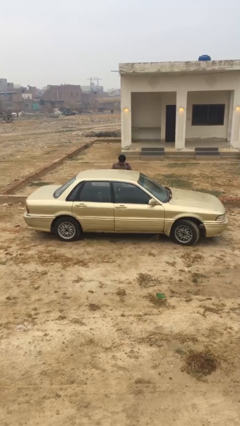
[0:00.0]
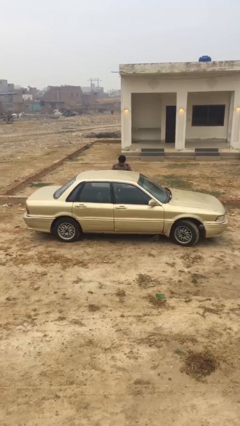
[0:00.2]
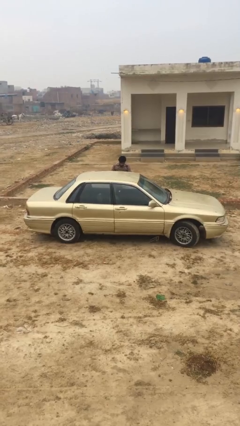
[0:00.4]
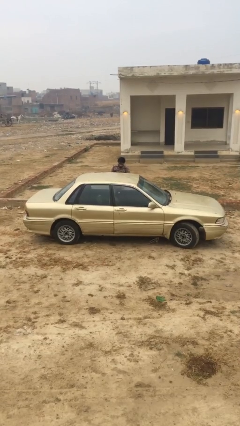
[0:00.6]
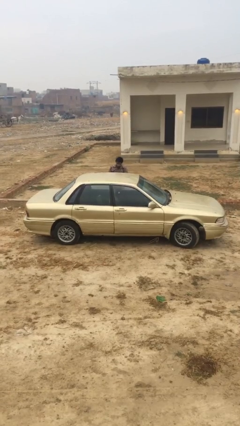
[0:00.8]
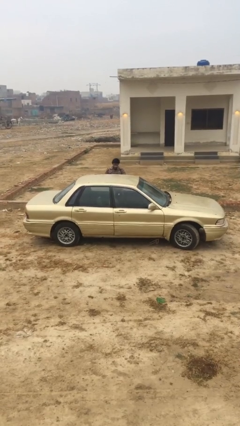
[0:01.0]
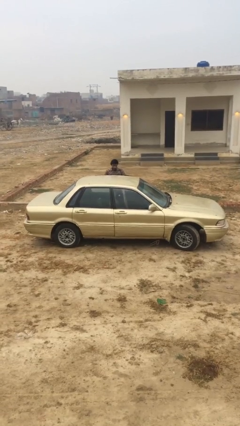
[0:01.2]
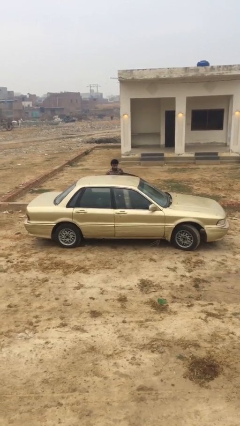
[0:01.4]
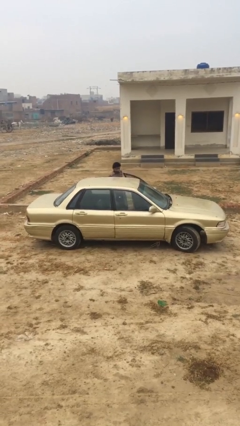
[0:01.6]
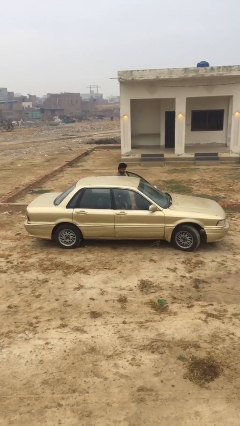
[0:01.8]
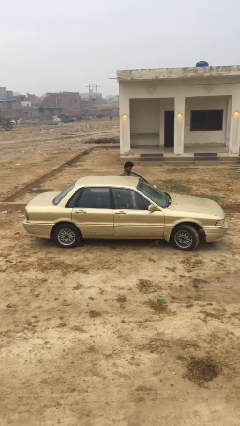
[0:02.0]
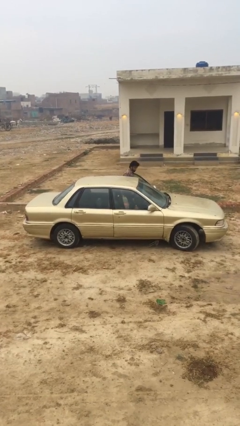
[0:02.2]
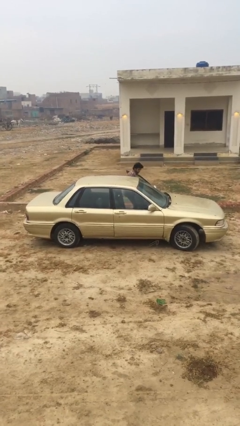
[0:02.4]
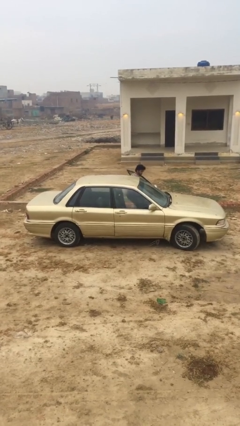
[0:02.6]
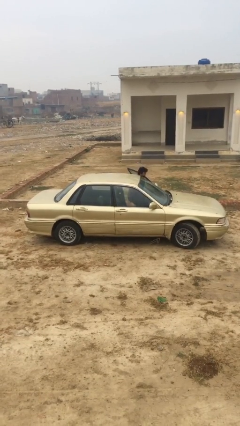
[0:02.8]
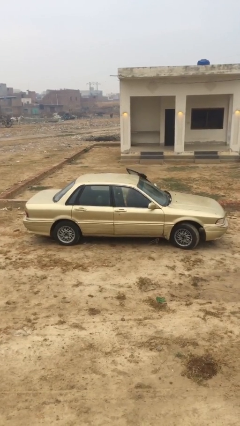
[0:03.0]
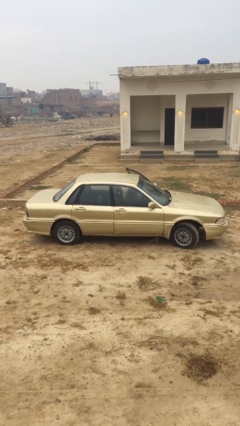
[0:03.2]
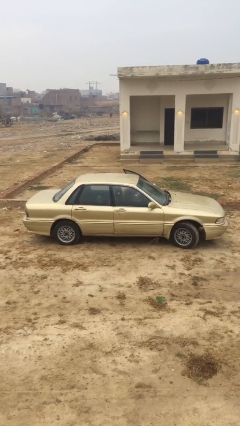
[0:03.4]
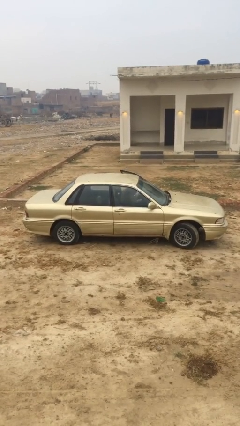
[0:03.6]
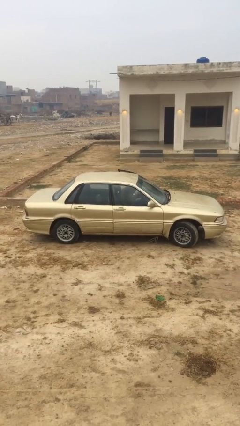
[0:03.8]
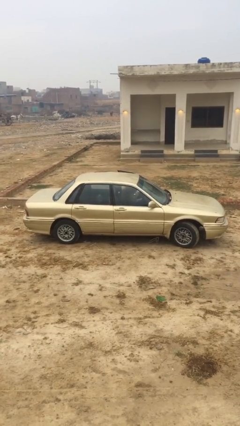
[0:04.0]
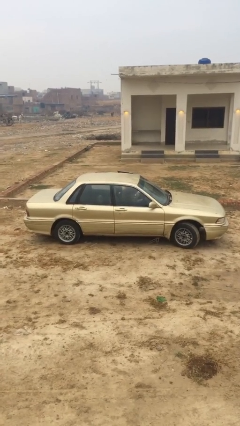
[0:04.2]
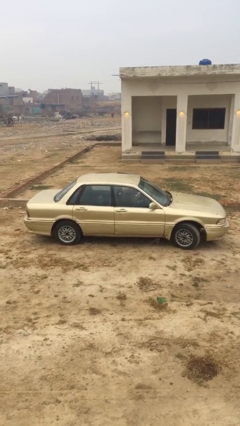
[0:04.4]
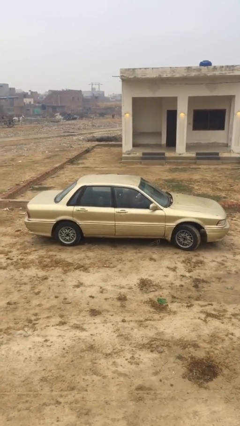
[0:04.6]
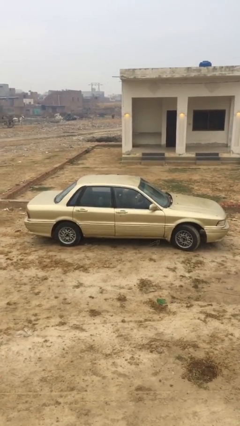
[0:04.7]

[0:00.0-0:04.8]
car picks up person

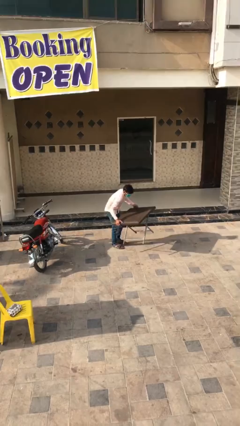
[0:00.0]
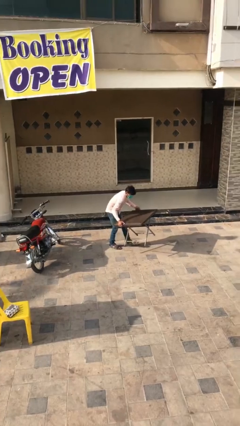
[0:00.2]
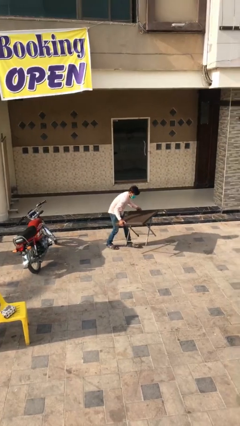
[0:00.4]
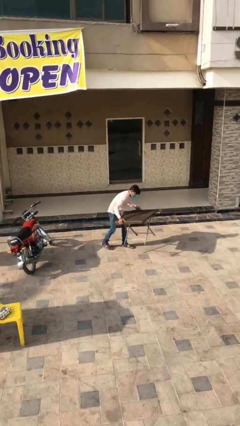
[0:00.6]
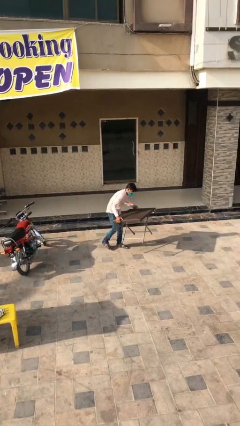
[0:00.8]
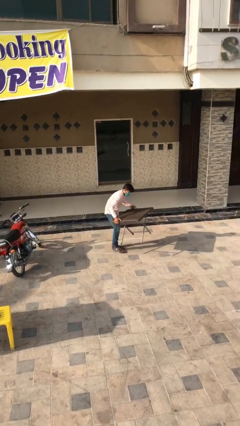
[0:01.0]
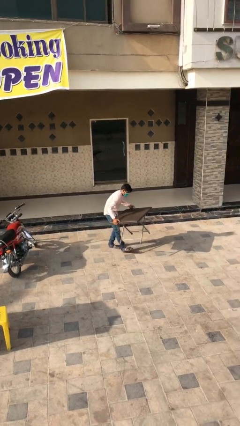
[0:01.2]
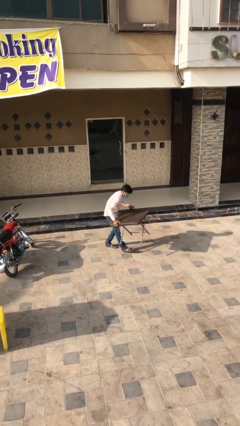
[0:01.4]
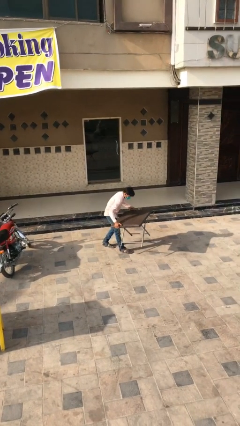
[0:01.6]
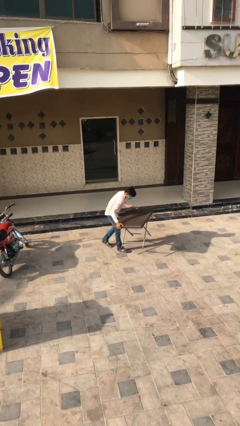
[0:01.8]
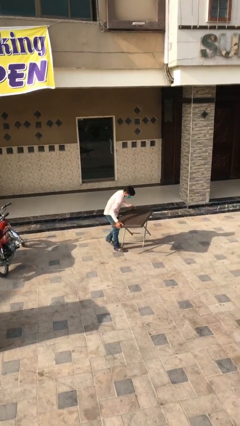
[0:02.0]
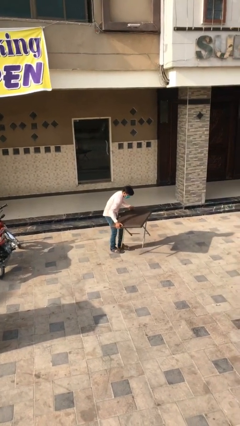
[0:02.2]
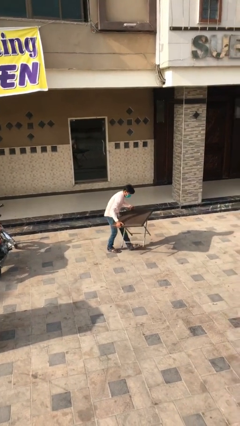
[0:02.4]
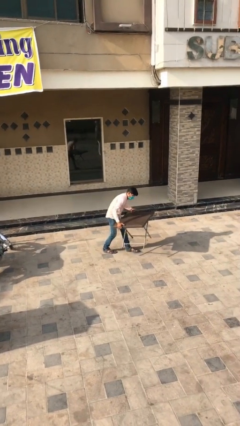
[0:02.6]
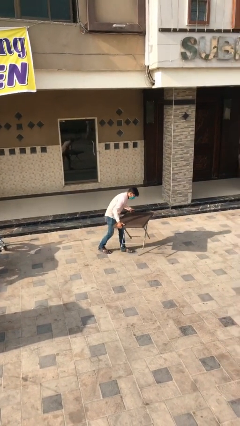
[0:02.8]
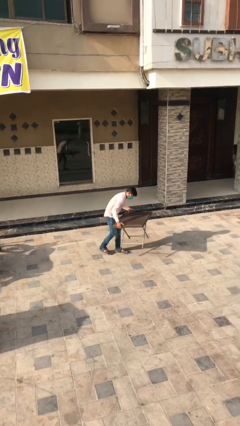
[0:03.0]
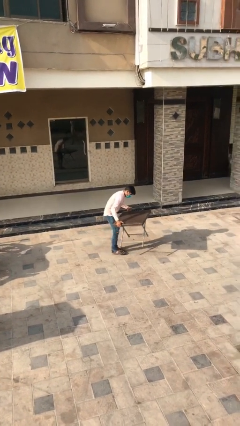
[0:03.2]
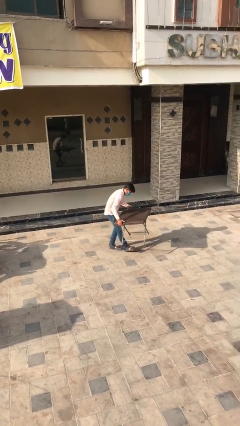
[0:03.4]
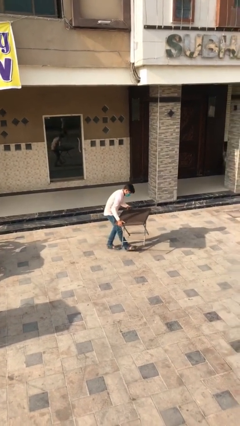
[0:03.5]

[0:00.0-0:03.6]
person carries heavy object

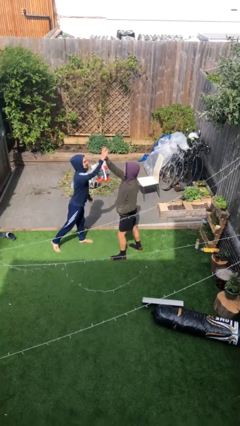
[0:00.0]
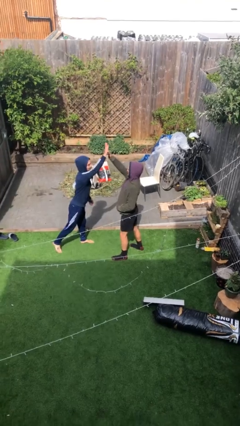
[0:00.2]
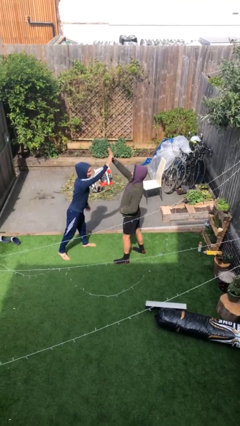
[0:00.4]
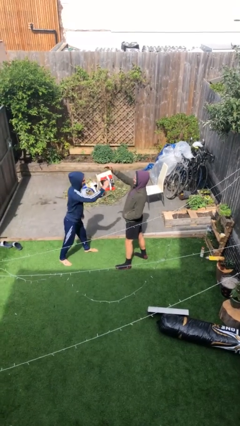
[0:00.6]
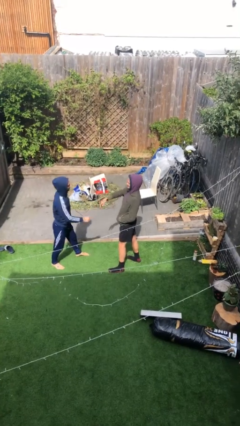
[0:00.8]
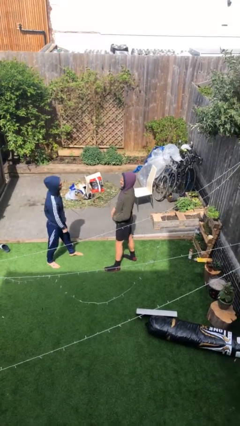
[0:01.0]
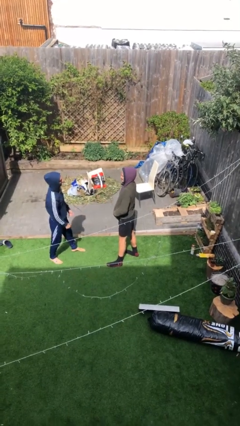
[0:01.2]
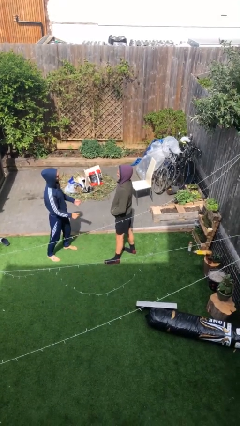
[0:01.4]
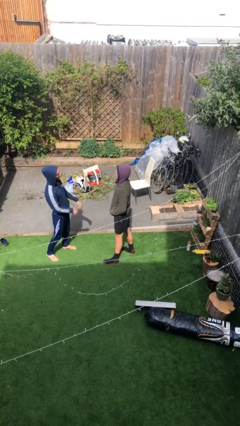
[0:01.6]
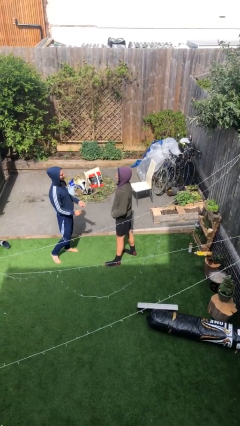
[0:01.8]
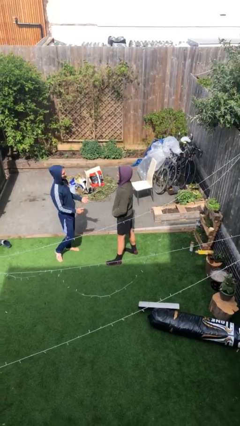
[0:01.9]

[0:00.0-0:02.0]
person highfives hand

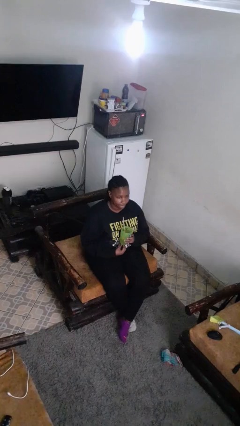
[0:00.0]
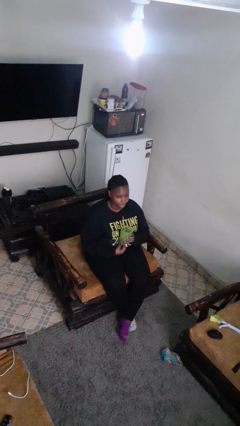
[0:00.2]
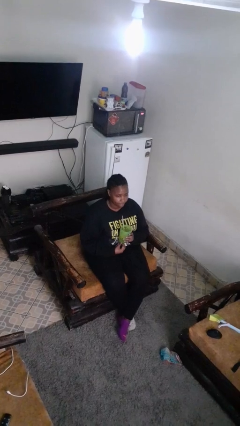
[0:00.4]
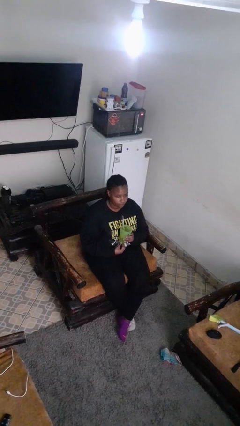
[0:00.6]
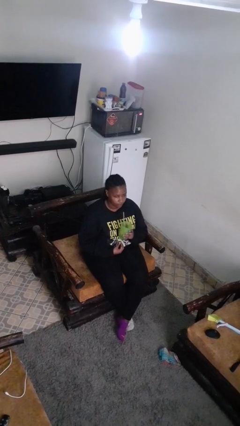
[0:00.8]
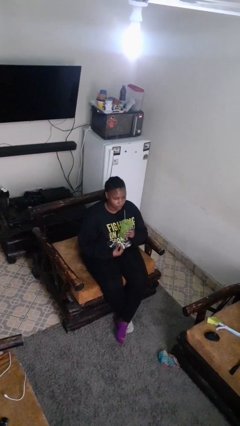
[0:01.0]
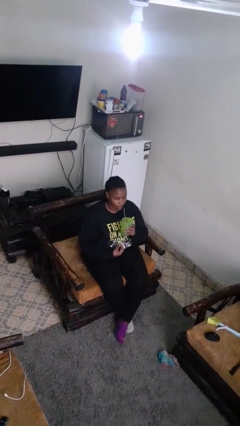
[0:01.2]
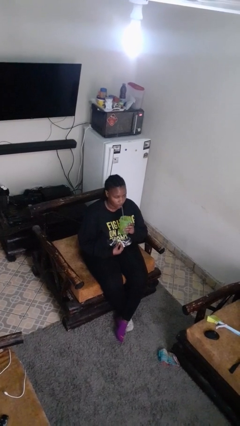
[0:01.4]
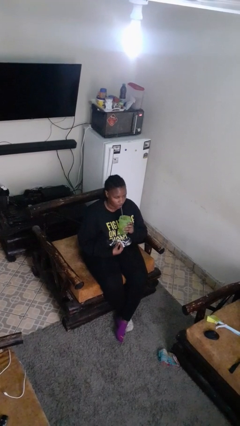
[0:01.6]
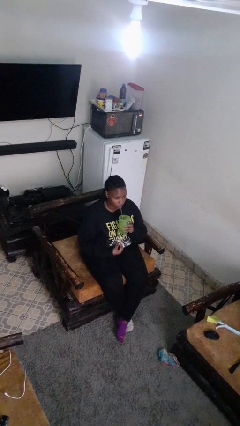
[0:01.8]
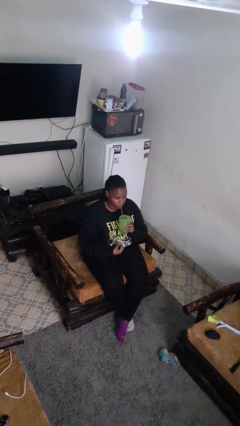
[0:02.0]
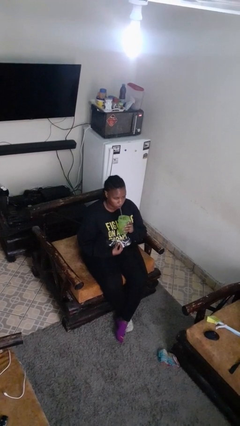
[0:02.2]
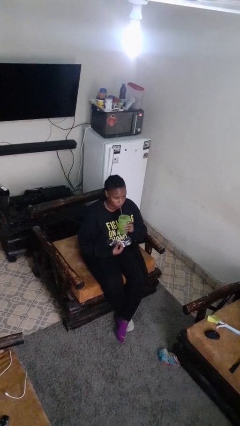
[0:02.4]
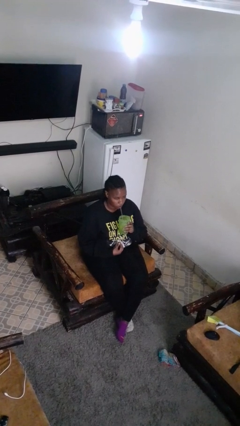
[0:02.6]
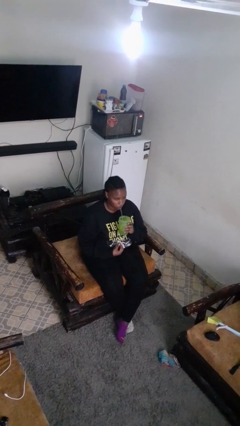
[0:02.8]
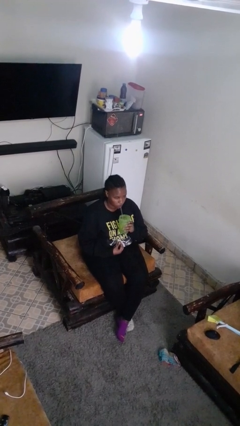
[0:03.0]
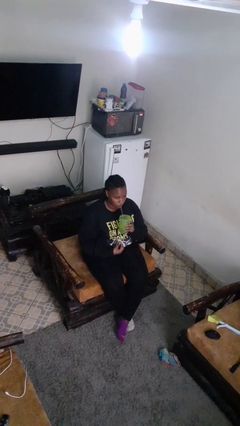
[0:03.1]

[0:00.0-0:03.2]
person drinks from straw

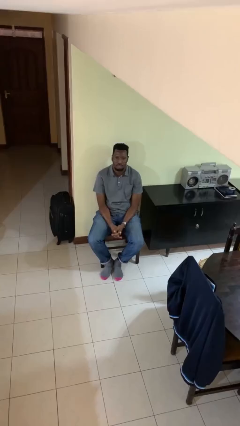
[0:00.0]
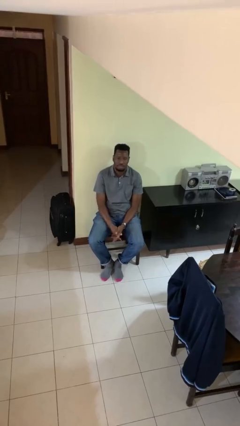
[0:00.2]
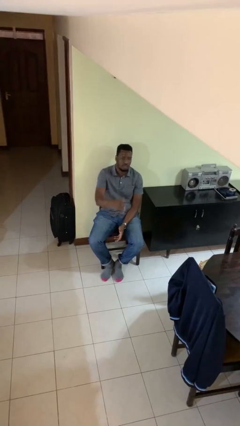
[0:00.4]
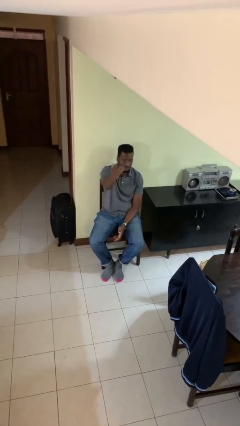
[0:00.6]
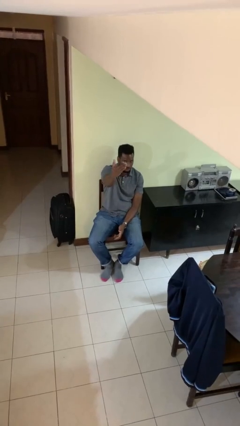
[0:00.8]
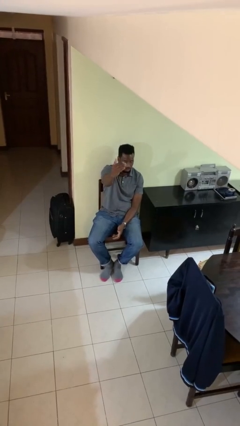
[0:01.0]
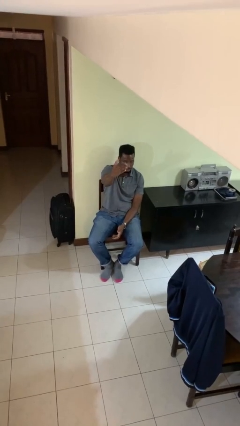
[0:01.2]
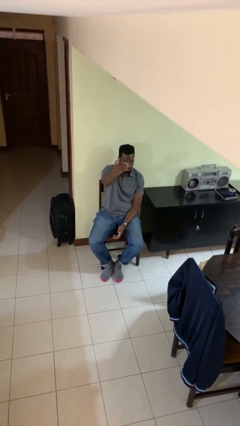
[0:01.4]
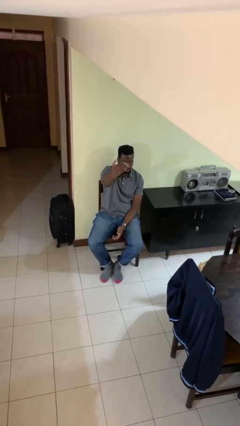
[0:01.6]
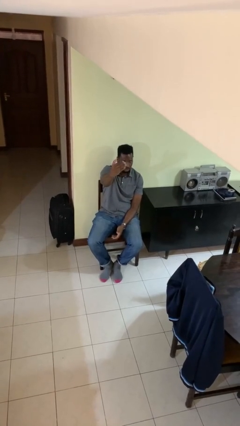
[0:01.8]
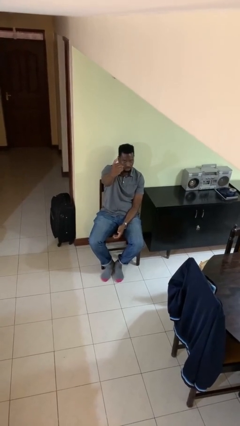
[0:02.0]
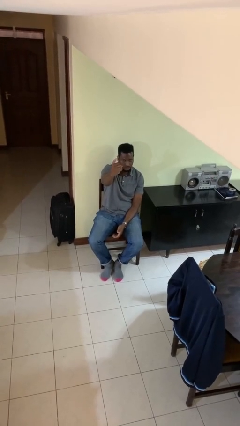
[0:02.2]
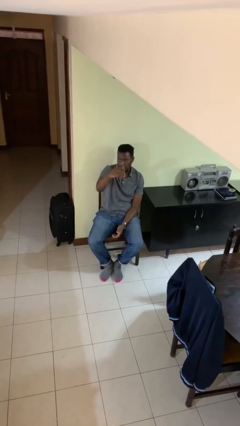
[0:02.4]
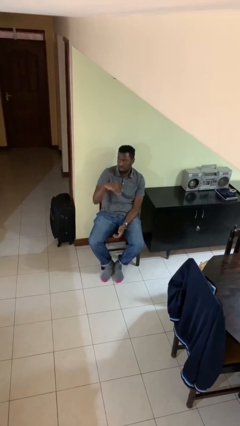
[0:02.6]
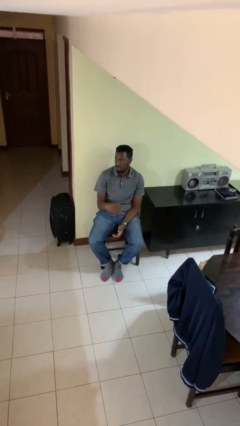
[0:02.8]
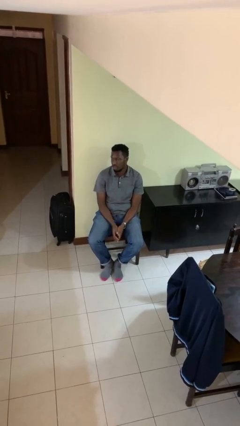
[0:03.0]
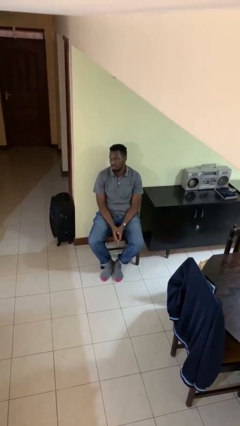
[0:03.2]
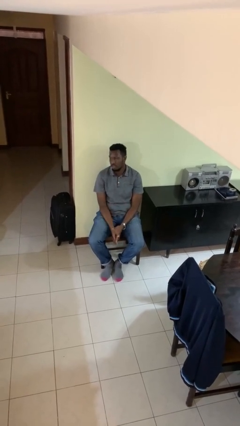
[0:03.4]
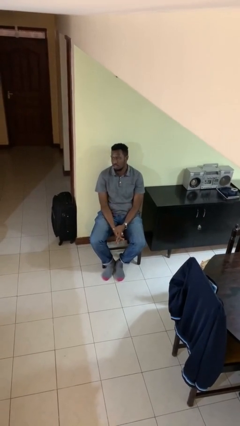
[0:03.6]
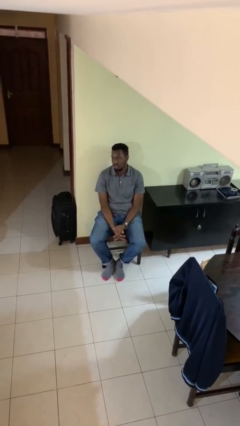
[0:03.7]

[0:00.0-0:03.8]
person gestures come here

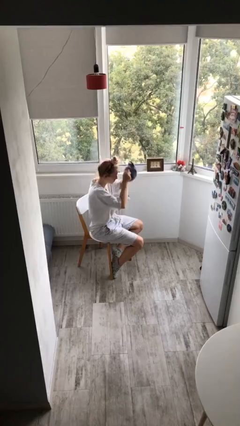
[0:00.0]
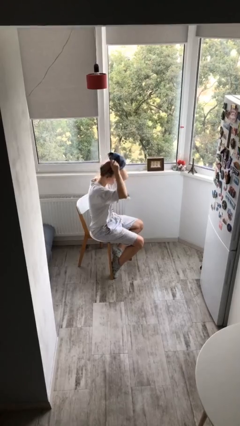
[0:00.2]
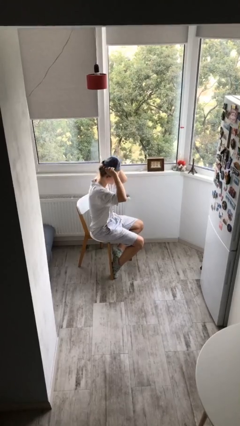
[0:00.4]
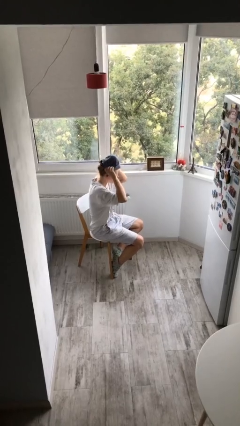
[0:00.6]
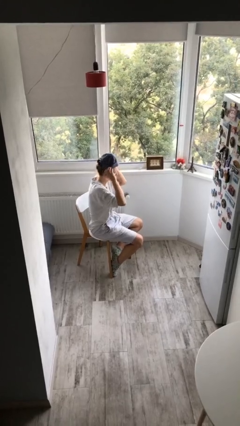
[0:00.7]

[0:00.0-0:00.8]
person puts on hat
